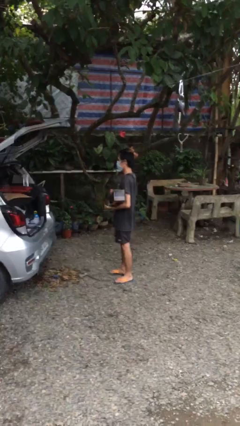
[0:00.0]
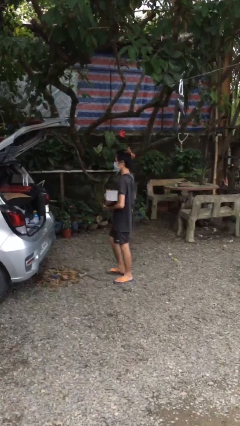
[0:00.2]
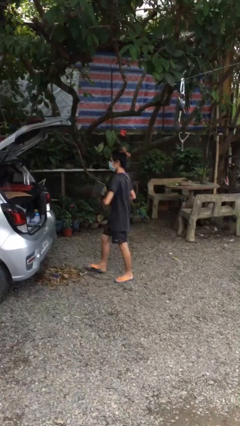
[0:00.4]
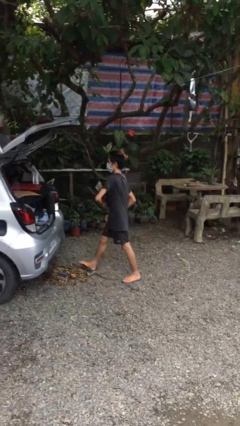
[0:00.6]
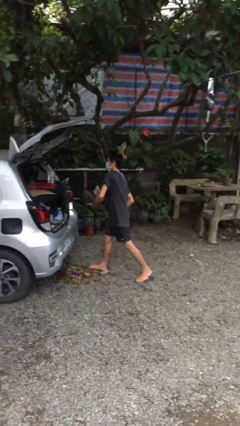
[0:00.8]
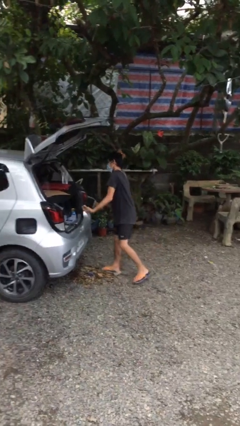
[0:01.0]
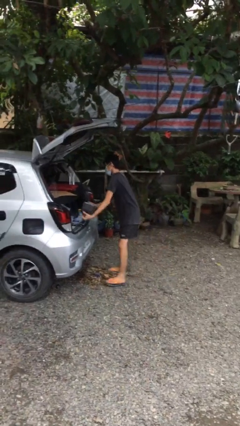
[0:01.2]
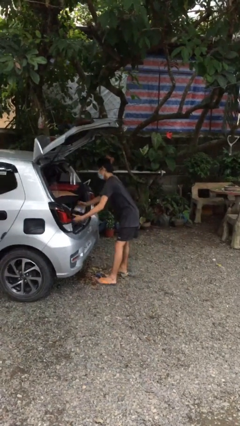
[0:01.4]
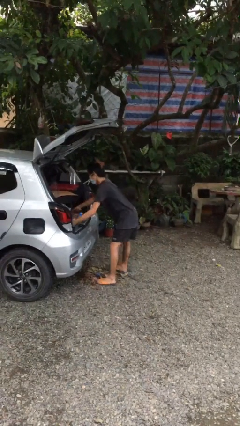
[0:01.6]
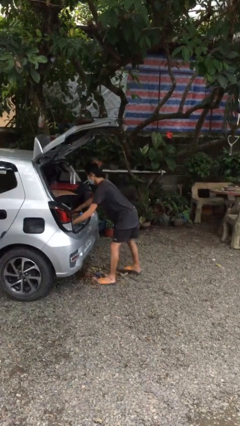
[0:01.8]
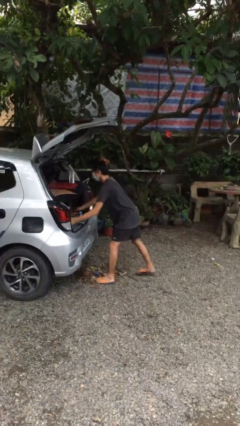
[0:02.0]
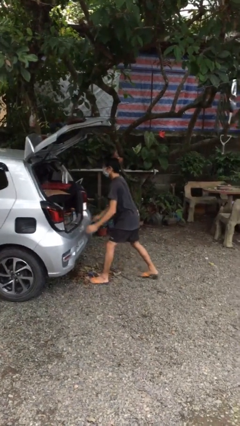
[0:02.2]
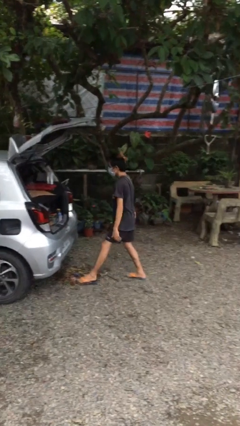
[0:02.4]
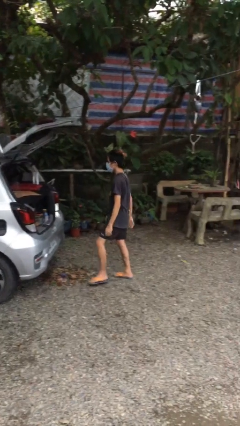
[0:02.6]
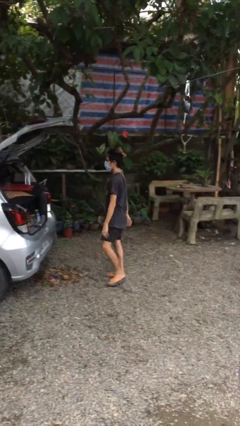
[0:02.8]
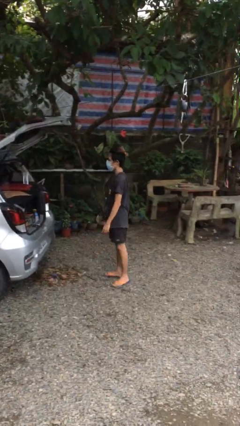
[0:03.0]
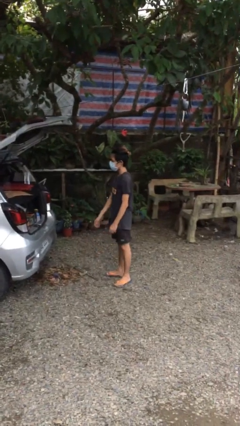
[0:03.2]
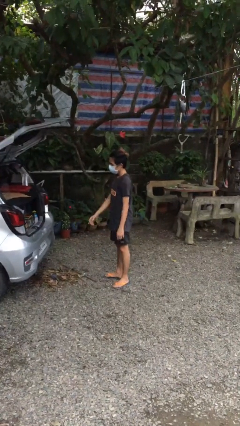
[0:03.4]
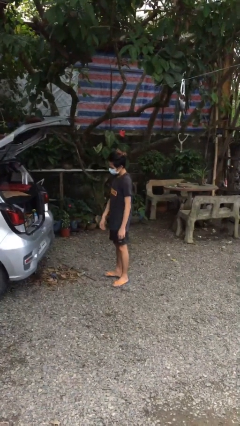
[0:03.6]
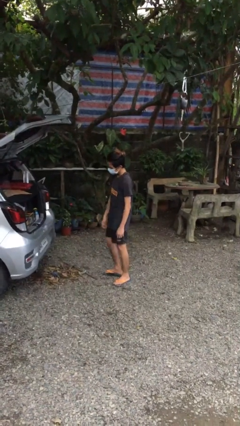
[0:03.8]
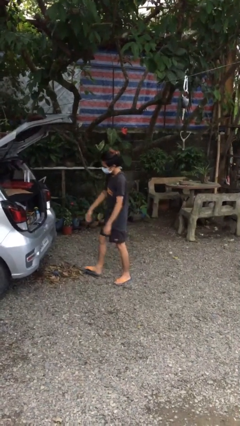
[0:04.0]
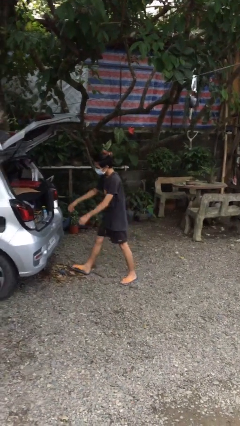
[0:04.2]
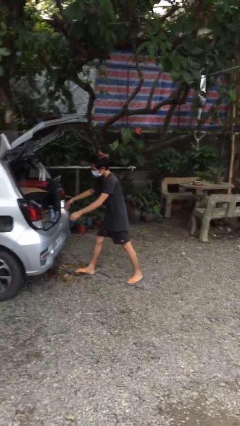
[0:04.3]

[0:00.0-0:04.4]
person loads car

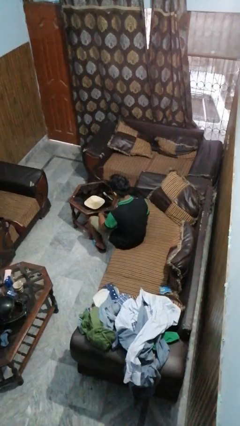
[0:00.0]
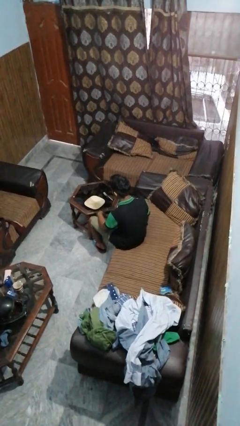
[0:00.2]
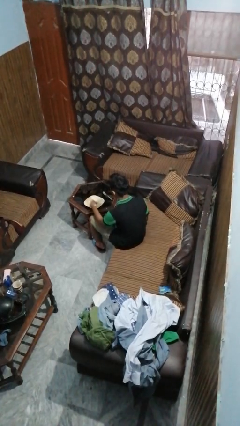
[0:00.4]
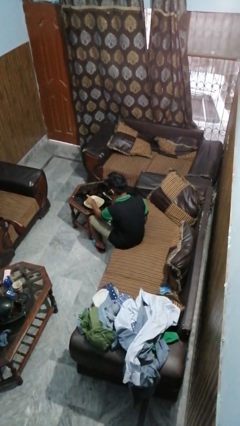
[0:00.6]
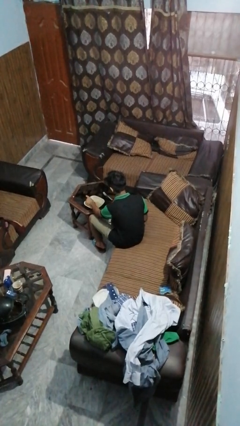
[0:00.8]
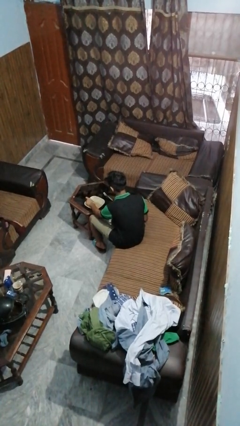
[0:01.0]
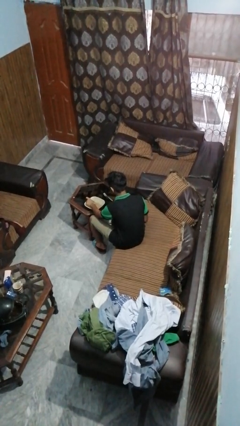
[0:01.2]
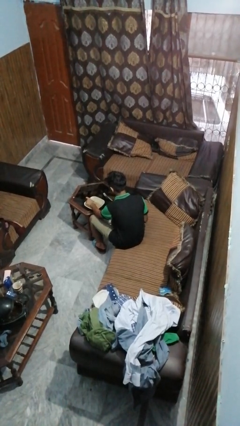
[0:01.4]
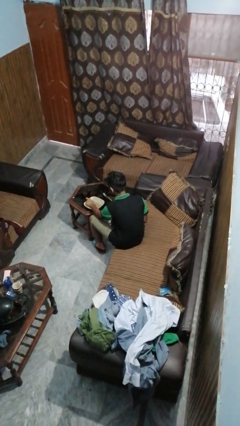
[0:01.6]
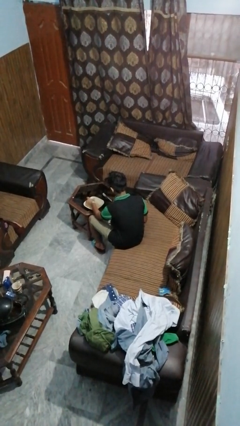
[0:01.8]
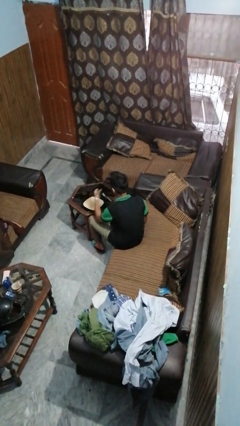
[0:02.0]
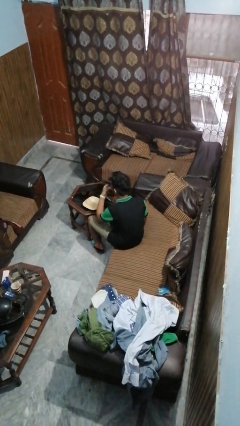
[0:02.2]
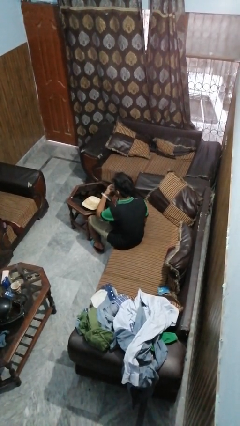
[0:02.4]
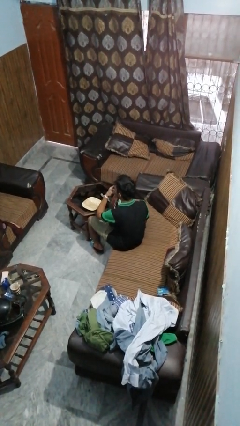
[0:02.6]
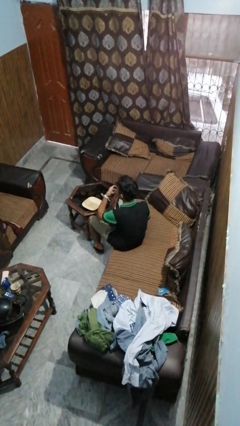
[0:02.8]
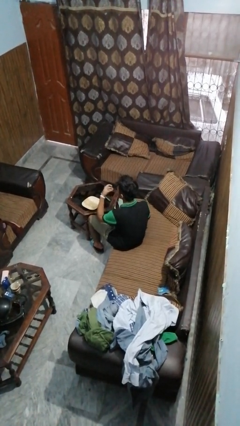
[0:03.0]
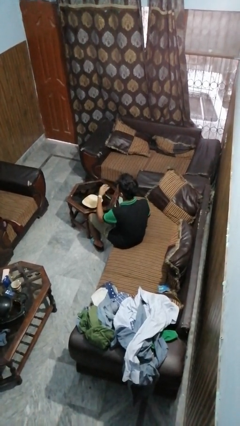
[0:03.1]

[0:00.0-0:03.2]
person eats with hands

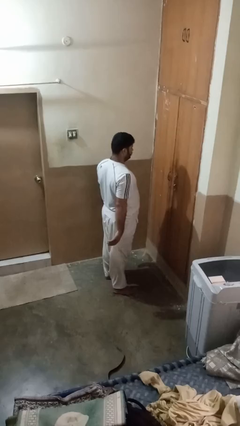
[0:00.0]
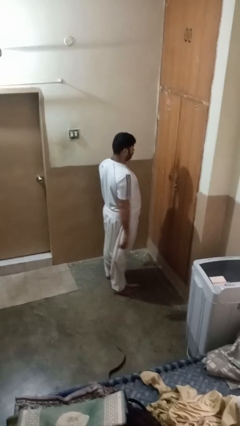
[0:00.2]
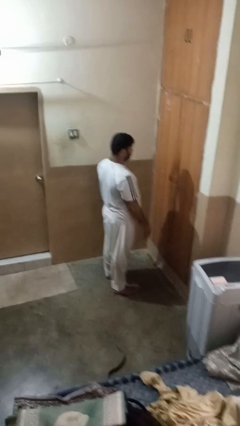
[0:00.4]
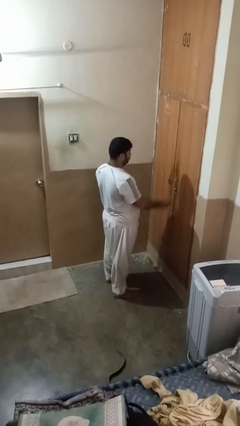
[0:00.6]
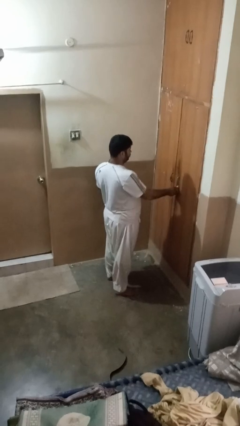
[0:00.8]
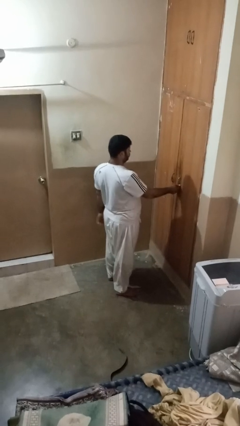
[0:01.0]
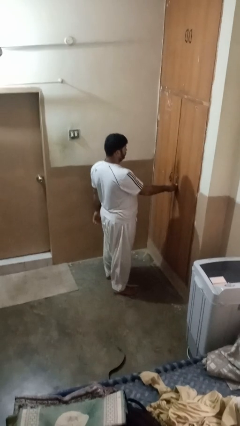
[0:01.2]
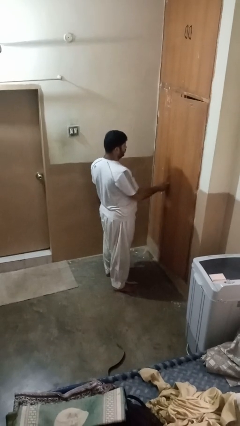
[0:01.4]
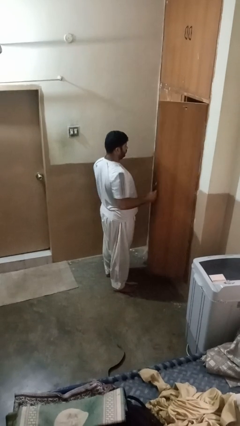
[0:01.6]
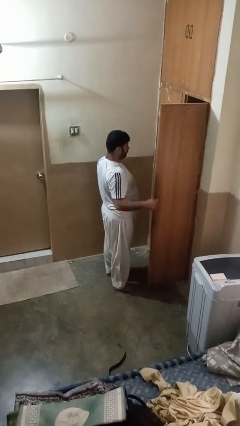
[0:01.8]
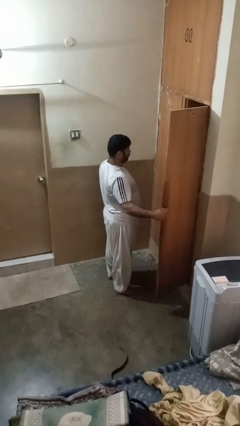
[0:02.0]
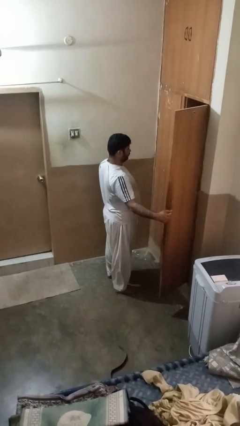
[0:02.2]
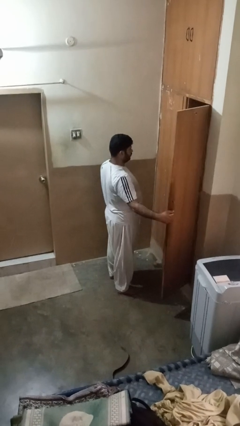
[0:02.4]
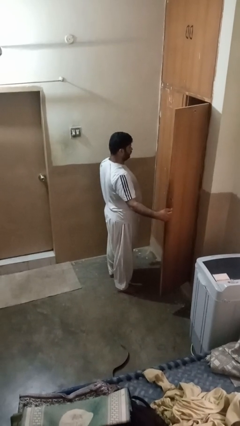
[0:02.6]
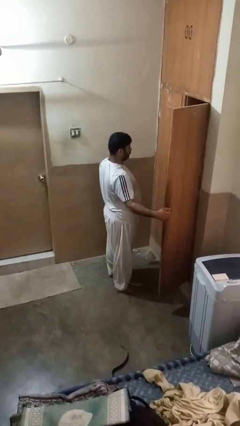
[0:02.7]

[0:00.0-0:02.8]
person opens closet door

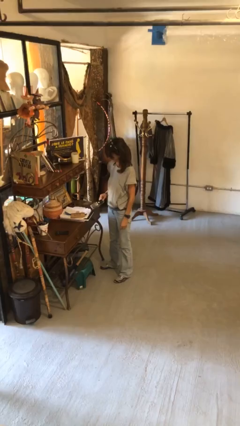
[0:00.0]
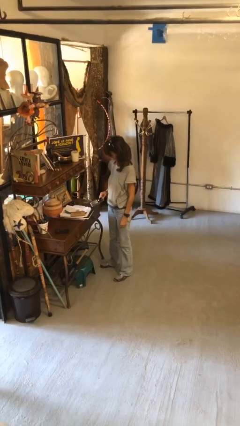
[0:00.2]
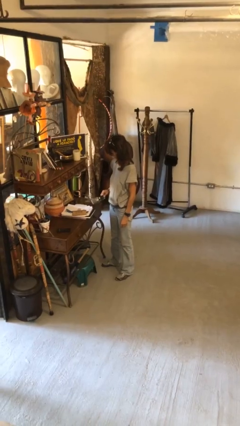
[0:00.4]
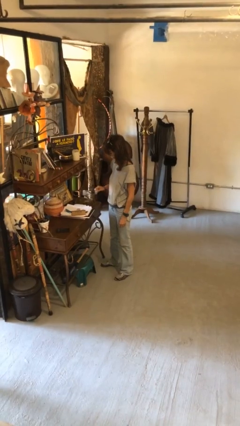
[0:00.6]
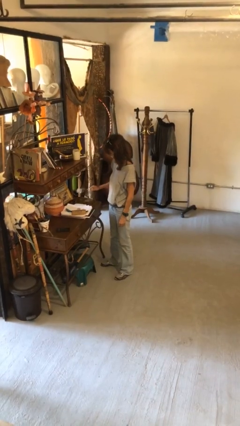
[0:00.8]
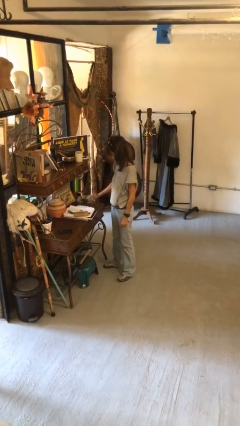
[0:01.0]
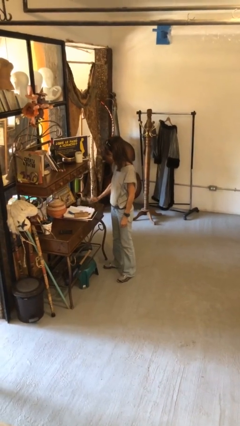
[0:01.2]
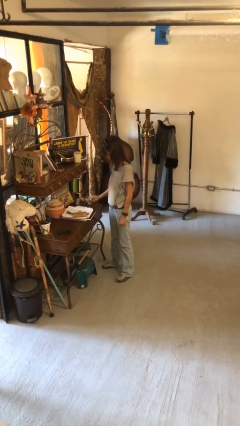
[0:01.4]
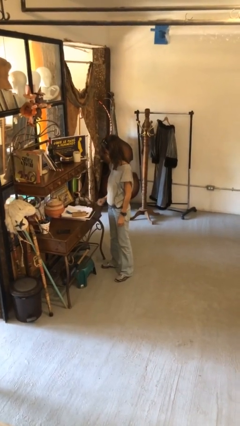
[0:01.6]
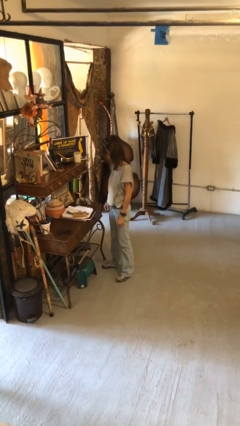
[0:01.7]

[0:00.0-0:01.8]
person puts down object on countertop

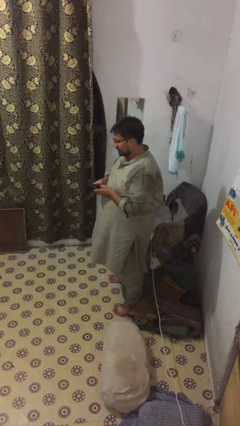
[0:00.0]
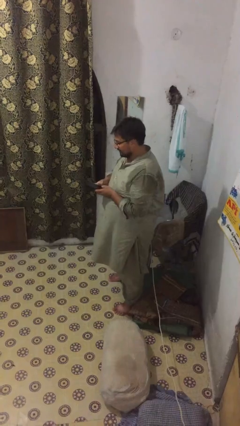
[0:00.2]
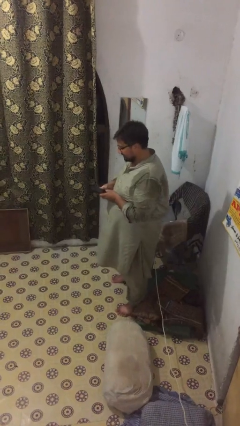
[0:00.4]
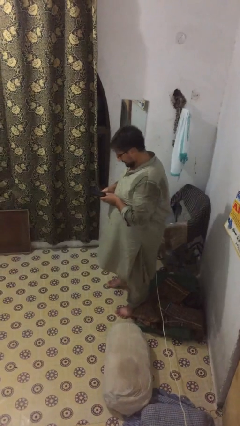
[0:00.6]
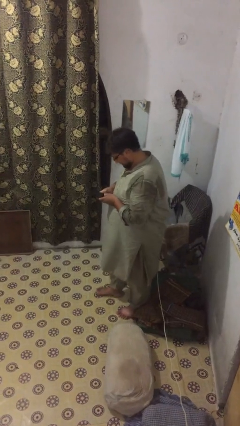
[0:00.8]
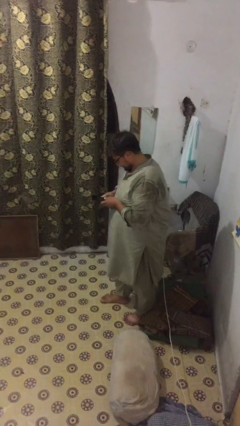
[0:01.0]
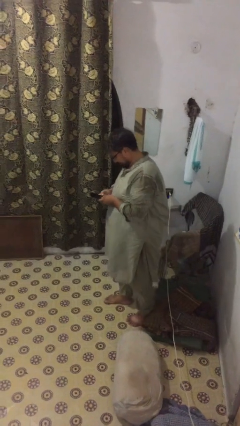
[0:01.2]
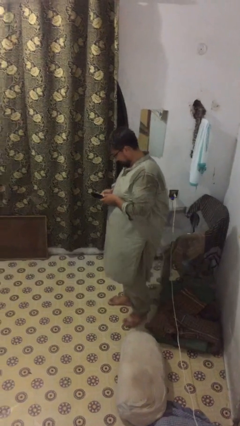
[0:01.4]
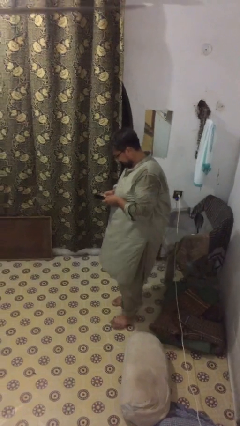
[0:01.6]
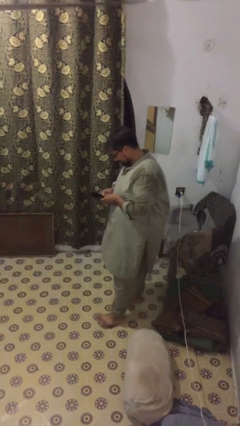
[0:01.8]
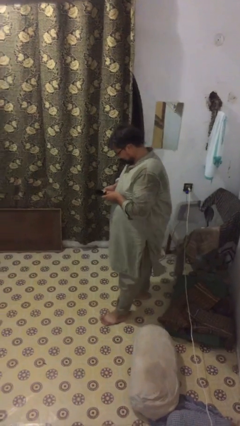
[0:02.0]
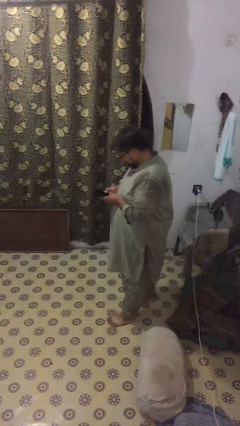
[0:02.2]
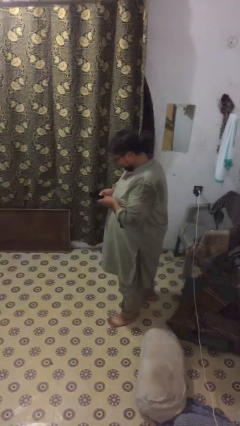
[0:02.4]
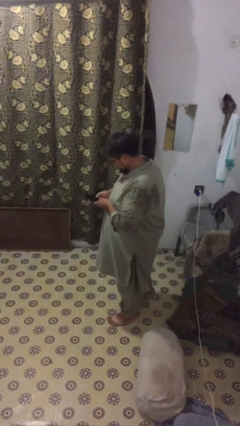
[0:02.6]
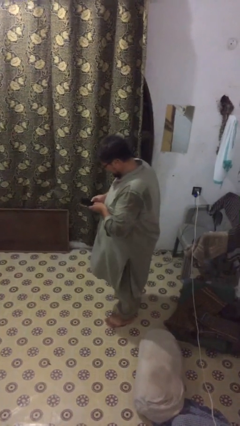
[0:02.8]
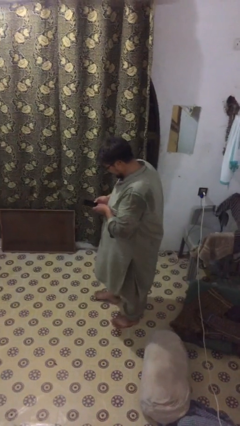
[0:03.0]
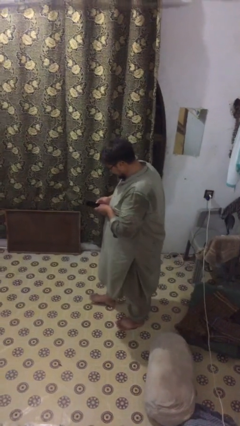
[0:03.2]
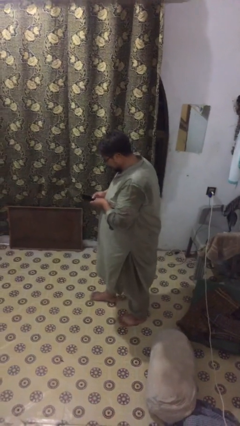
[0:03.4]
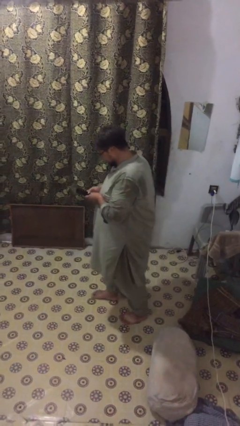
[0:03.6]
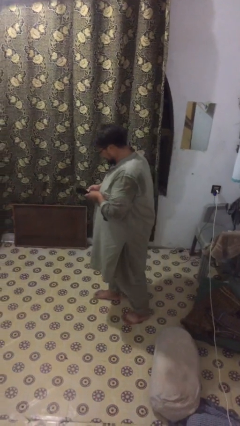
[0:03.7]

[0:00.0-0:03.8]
person texts on phone

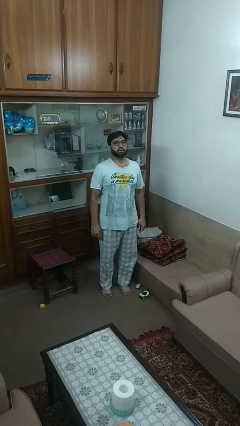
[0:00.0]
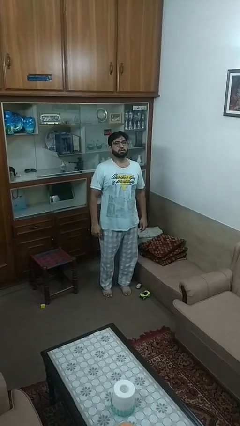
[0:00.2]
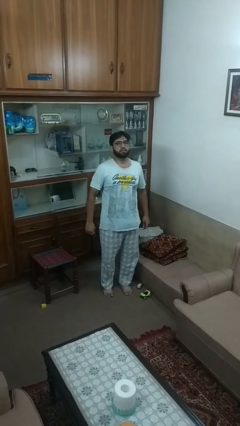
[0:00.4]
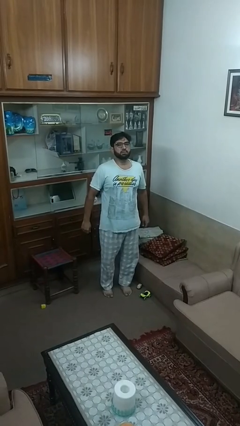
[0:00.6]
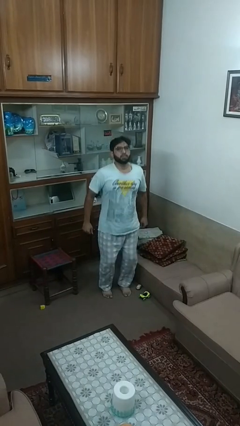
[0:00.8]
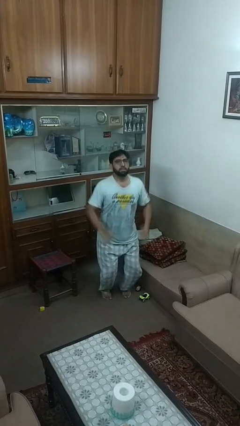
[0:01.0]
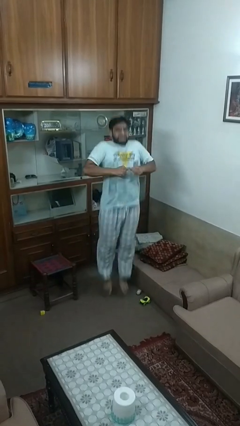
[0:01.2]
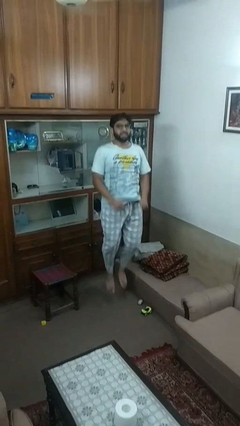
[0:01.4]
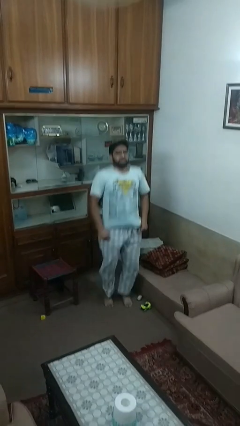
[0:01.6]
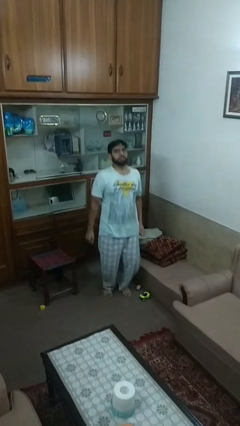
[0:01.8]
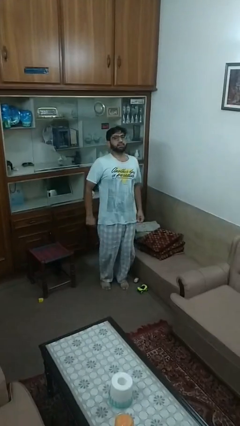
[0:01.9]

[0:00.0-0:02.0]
person jumps
